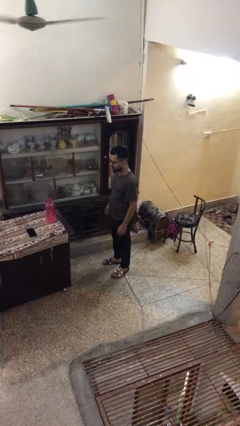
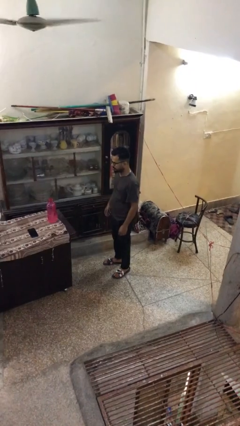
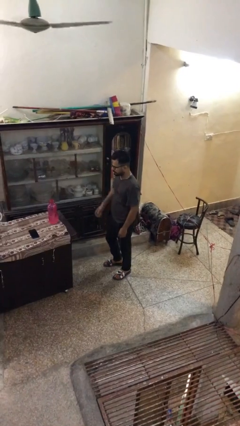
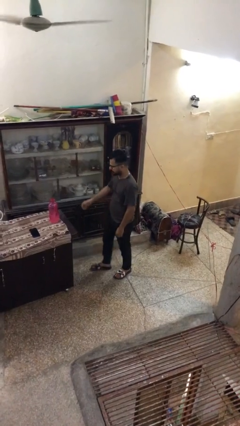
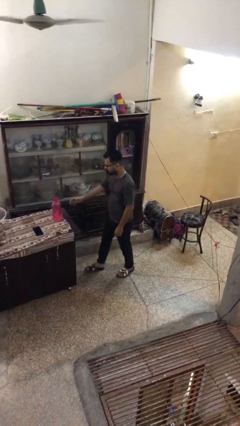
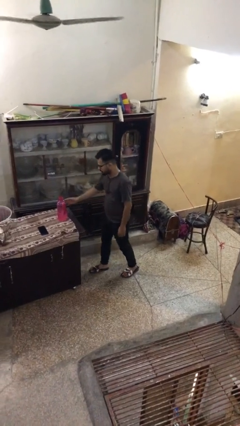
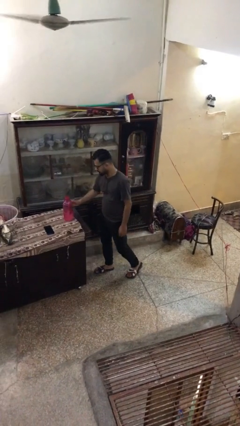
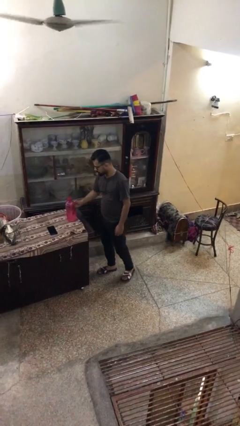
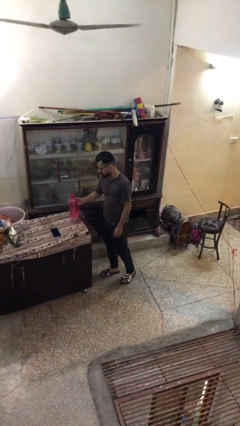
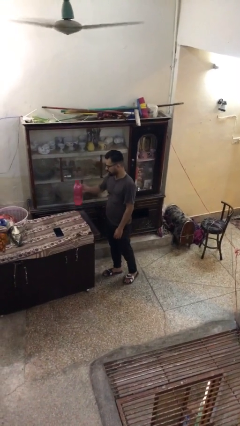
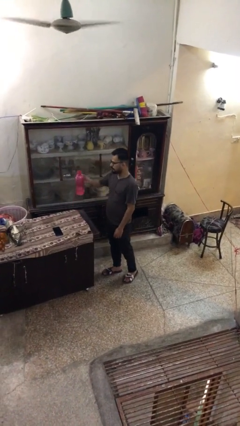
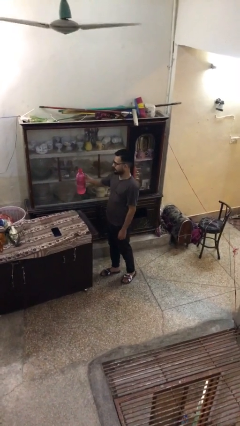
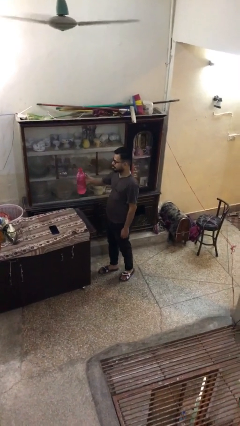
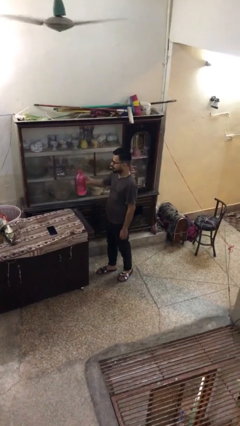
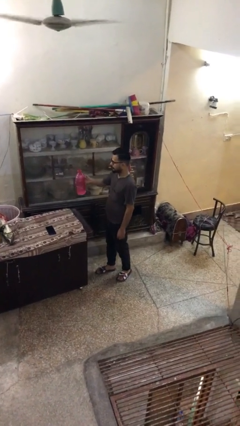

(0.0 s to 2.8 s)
person picks up object from table

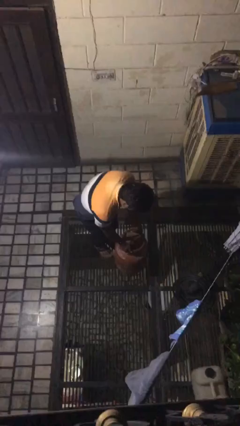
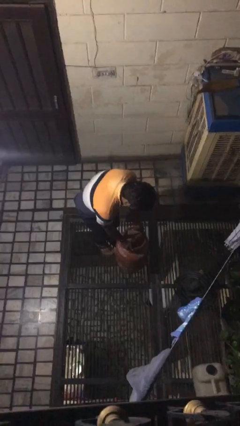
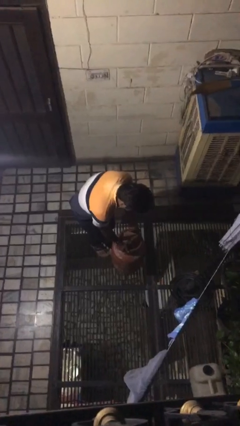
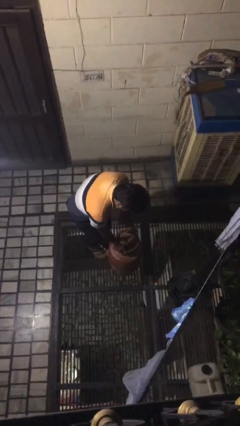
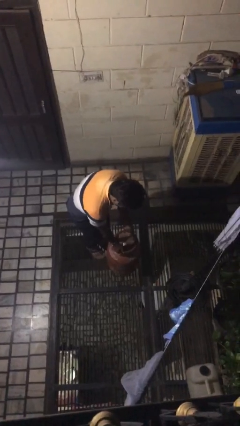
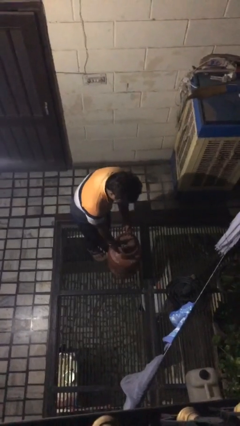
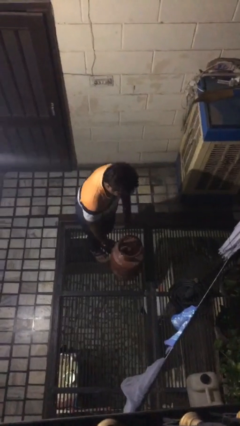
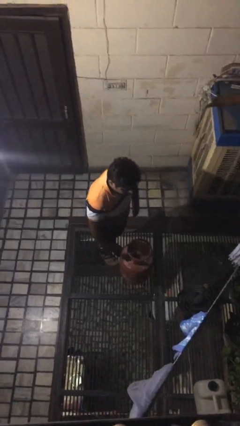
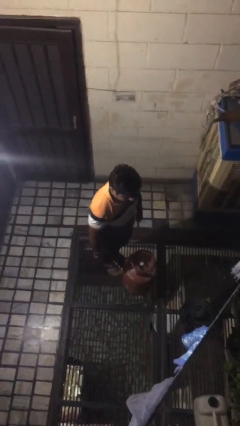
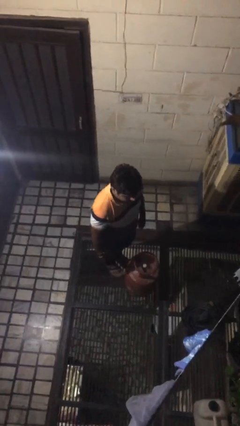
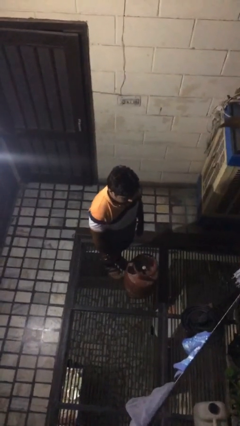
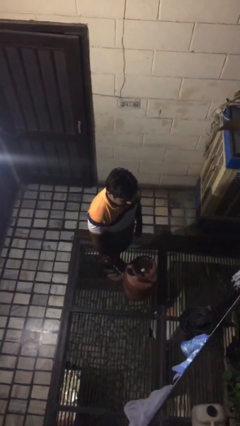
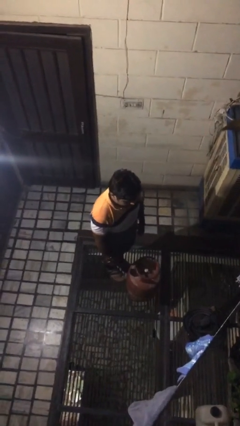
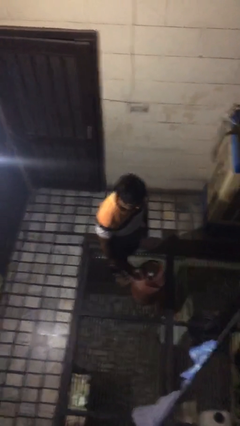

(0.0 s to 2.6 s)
person puts down object on floor

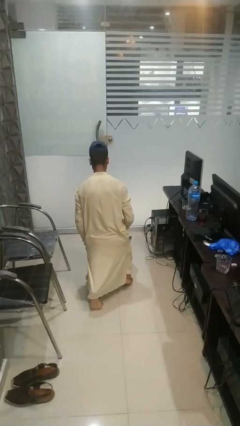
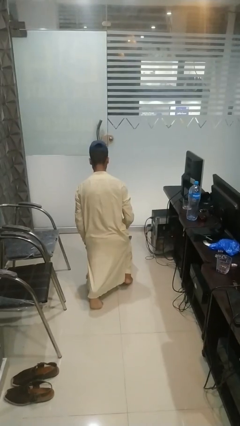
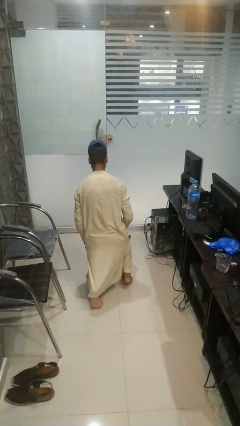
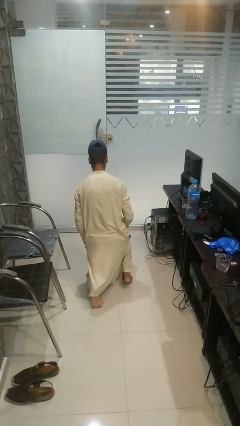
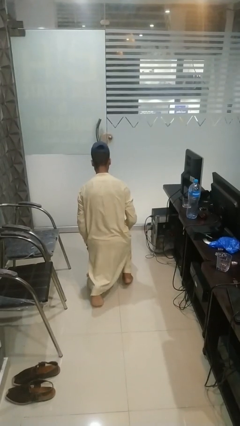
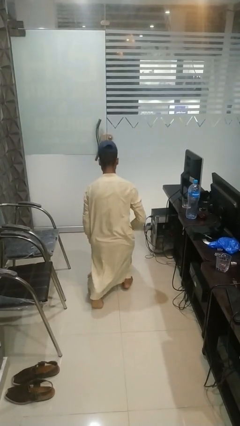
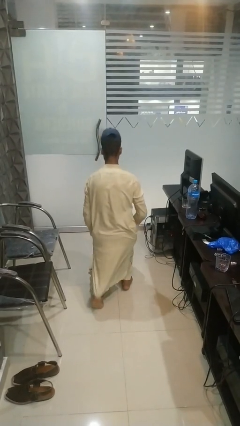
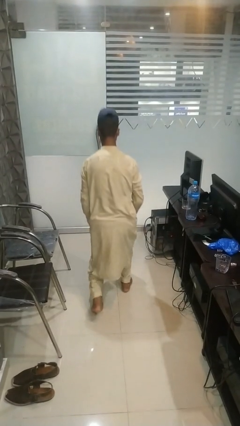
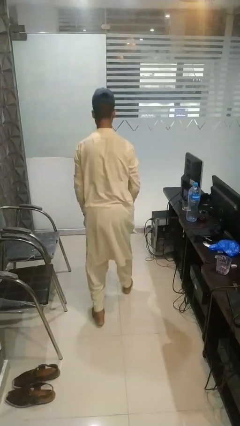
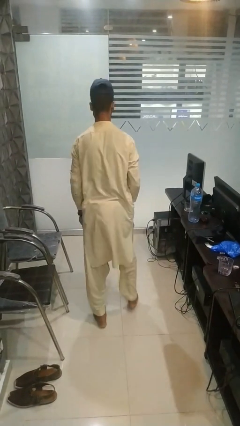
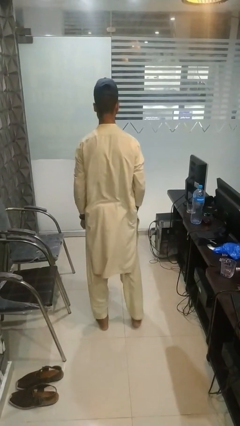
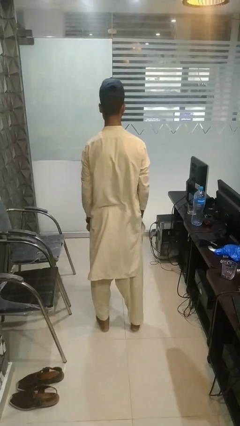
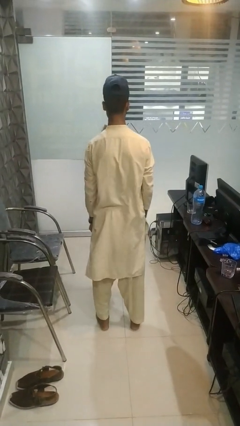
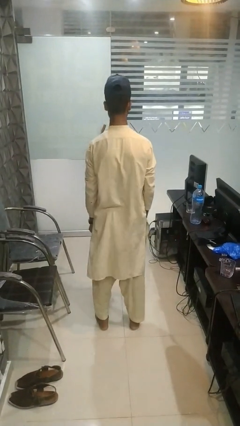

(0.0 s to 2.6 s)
person stands up from floor

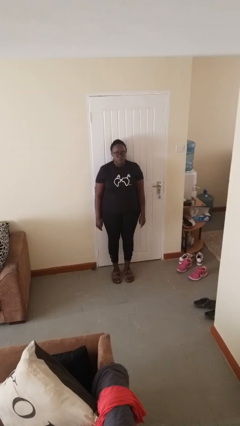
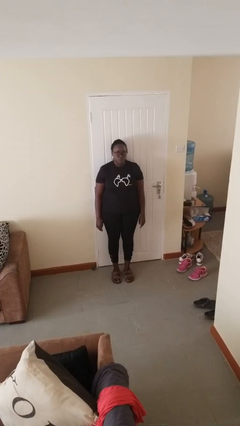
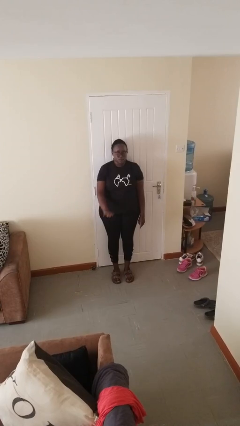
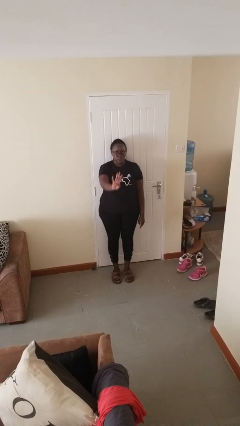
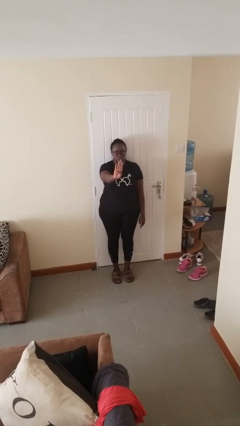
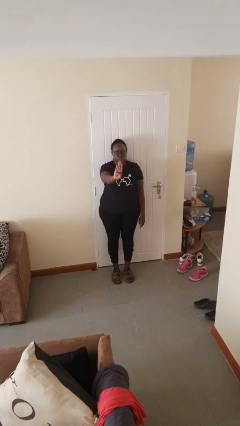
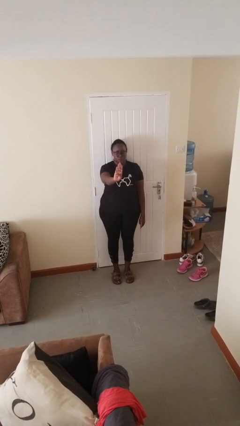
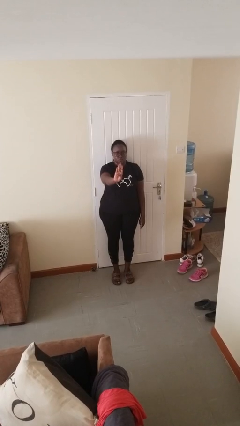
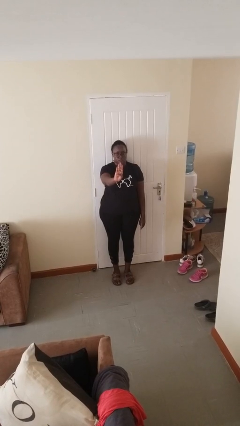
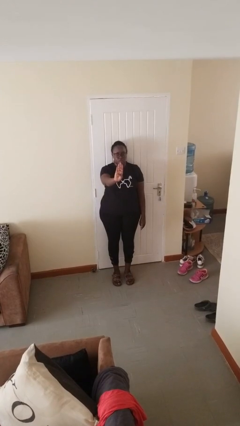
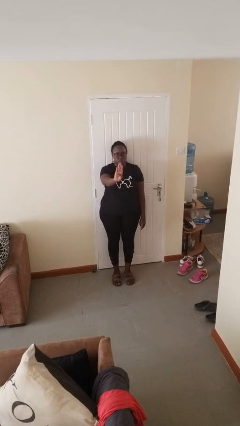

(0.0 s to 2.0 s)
person gestures number four

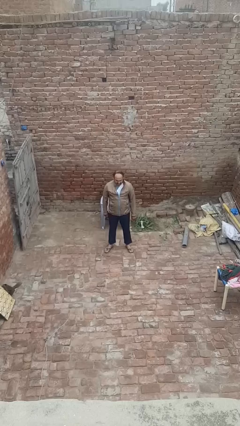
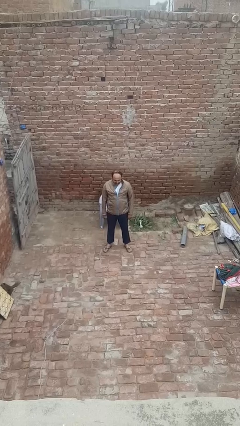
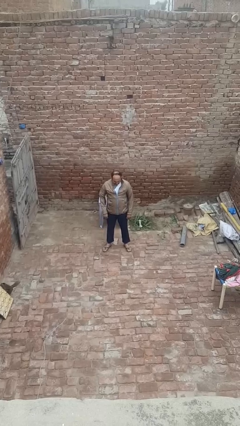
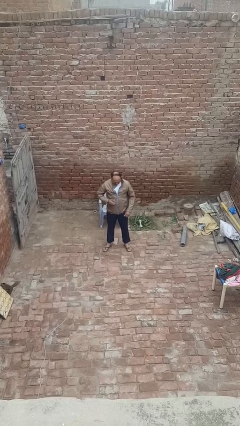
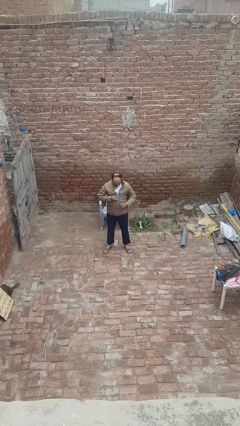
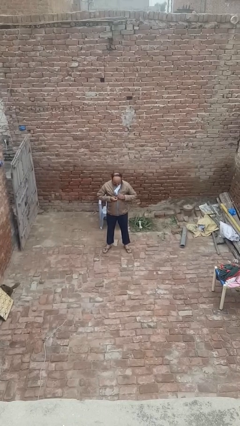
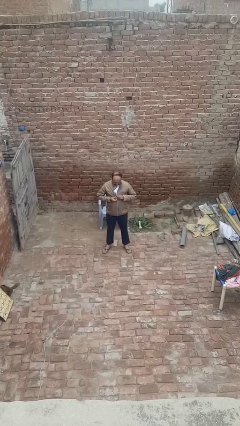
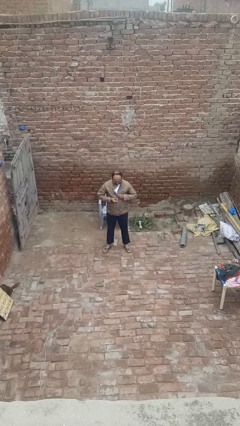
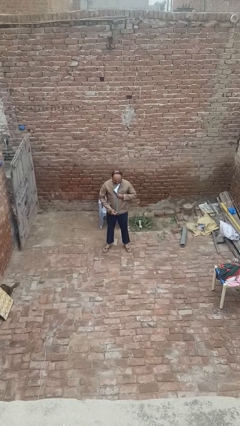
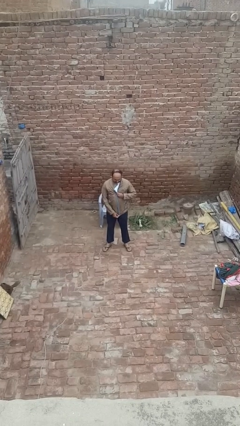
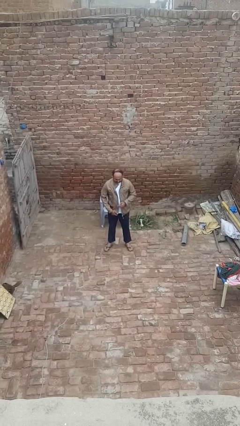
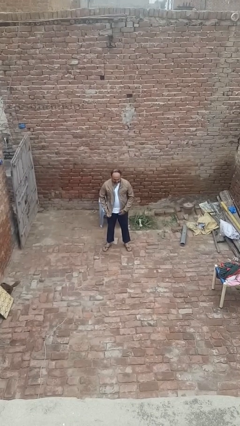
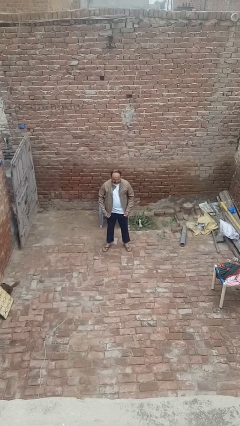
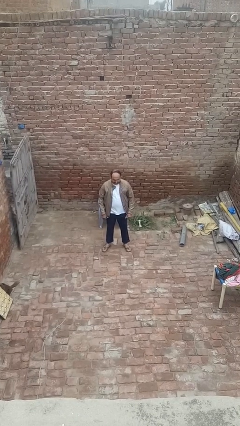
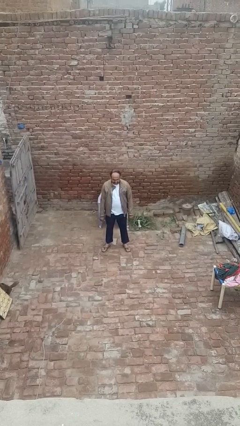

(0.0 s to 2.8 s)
person unzips jacket

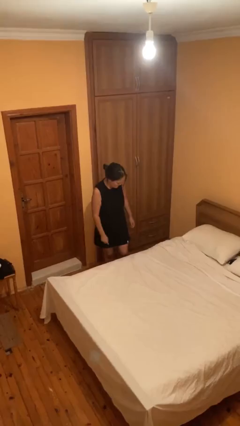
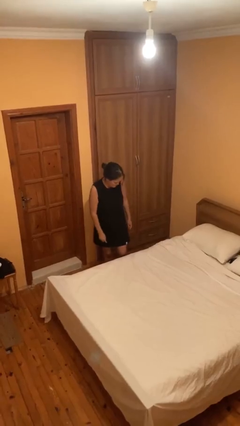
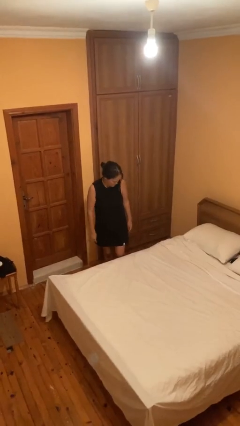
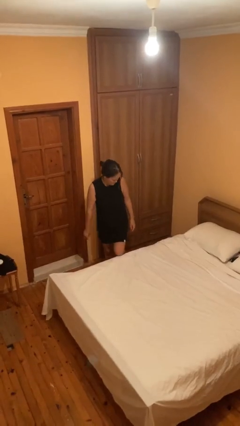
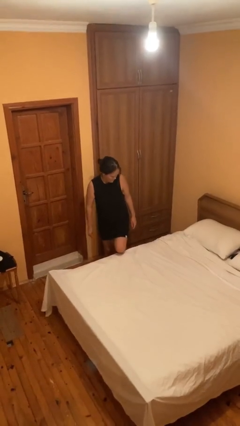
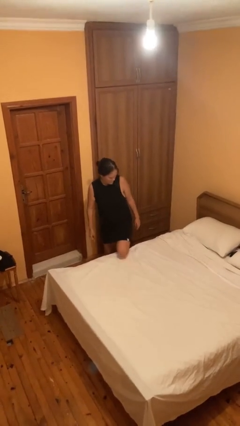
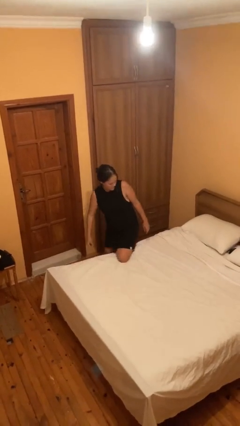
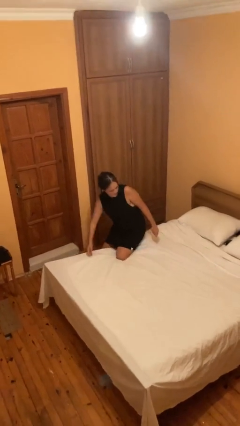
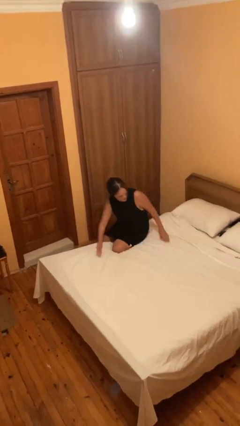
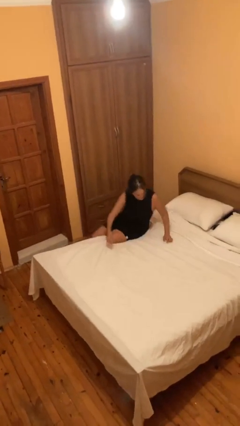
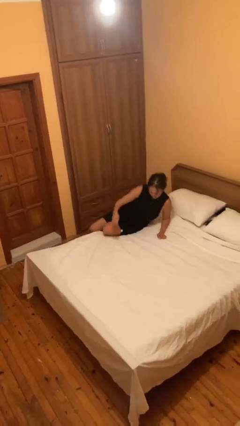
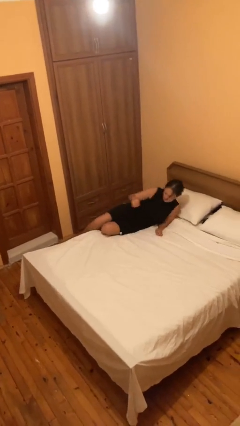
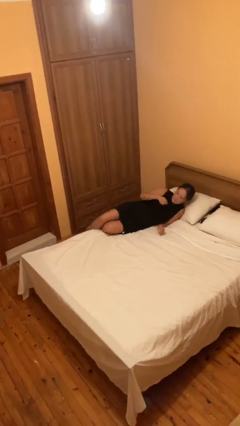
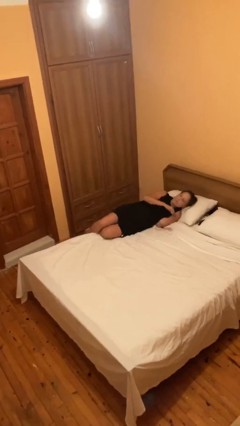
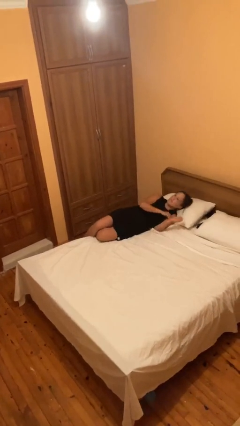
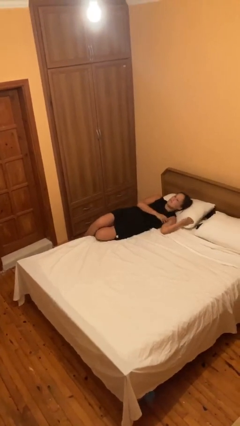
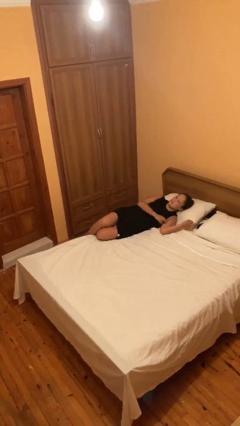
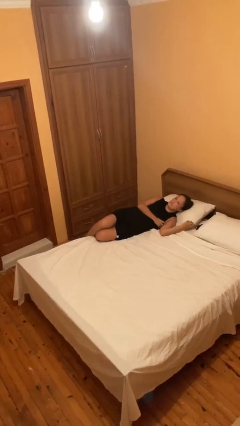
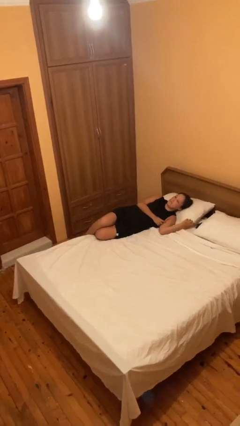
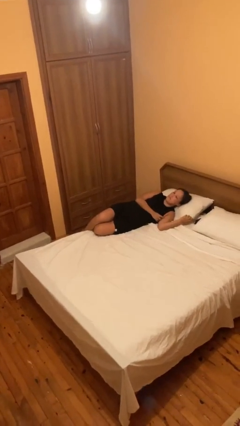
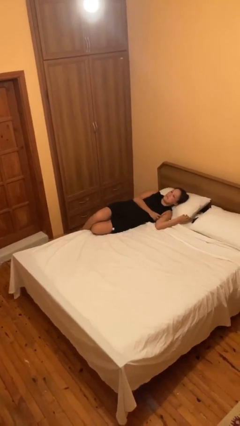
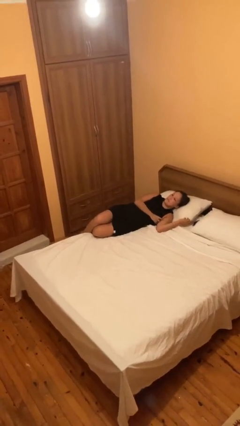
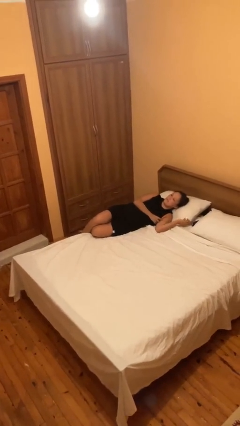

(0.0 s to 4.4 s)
person lies down on bed
